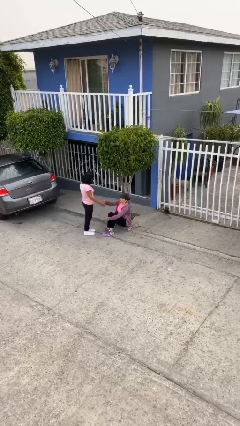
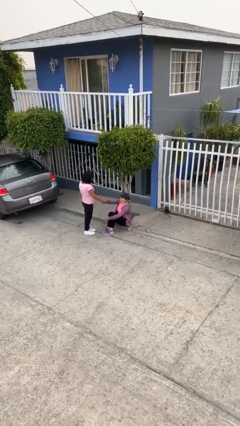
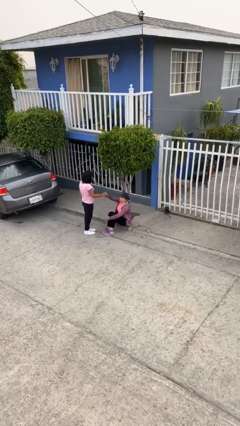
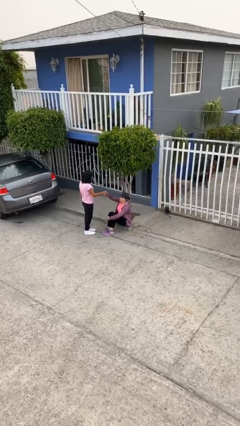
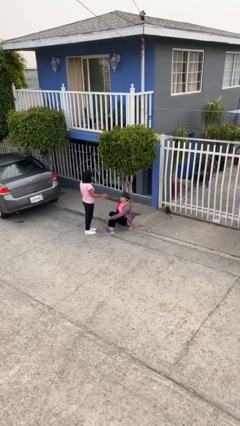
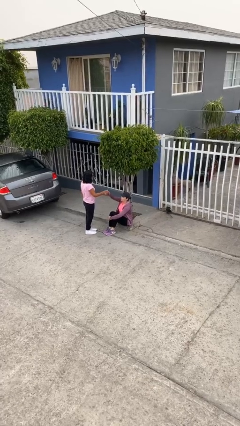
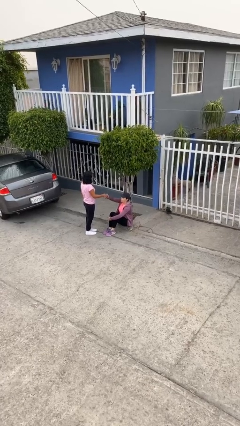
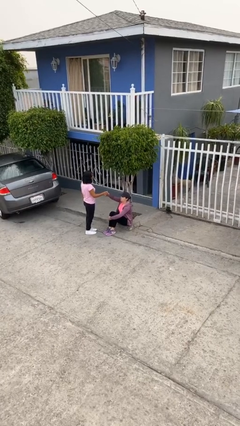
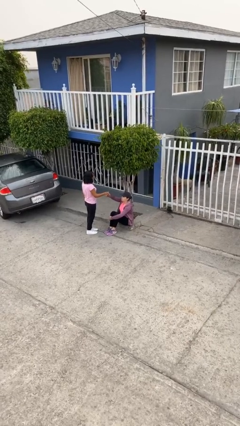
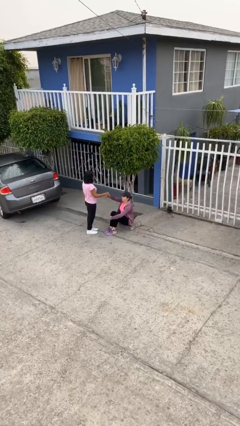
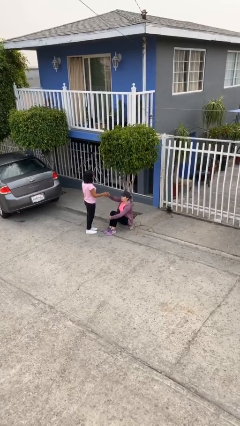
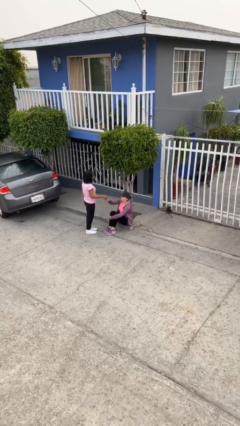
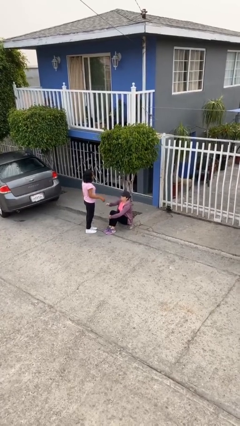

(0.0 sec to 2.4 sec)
person shakes hand

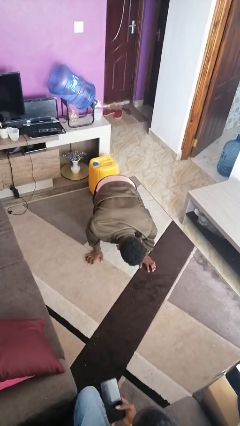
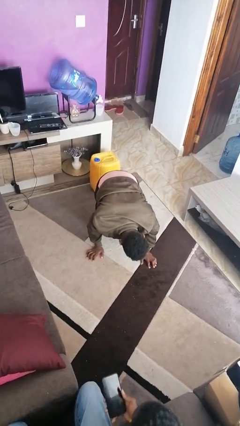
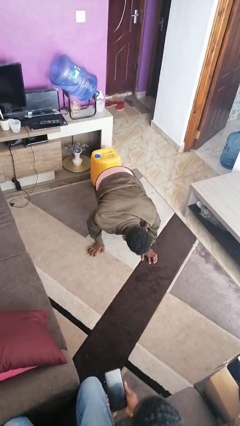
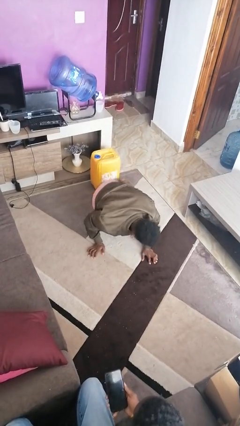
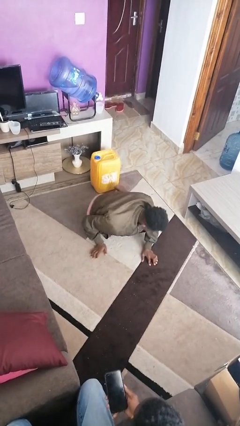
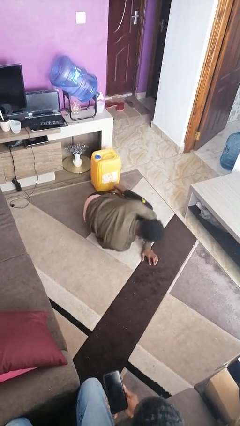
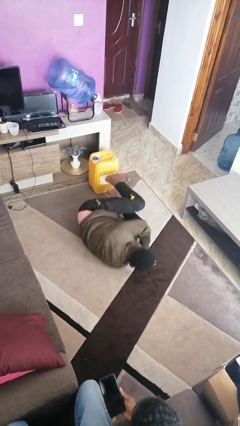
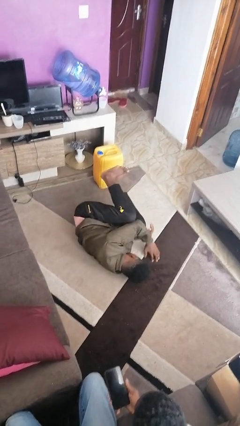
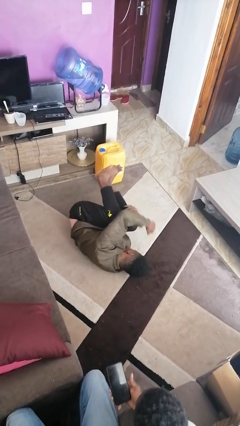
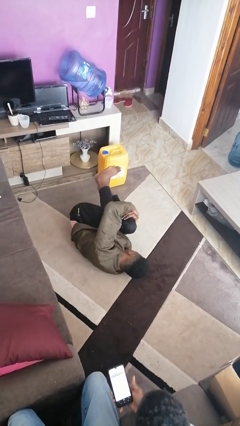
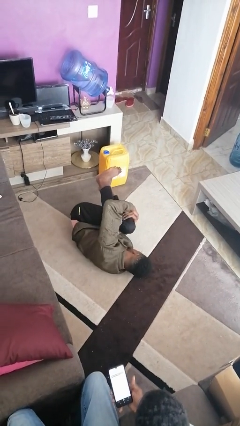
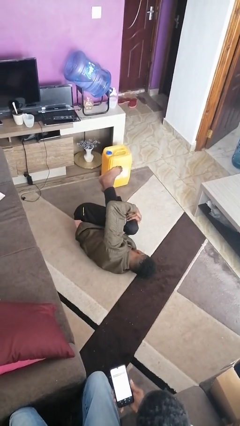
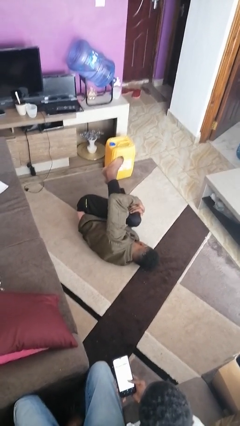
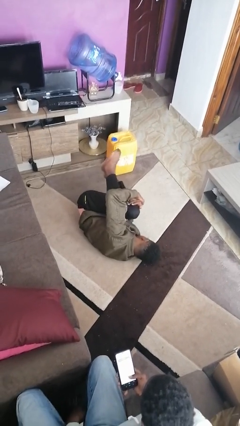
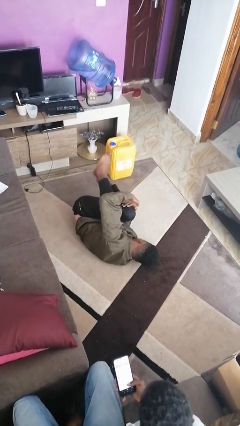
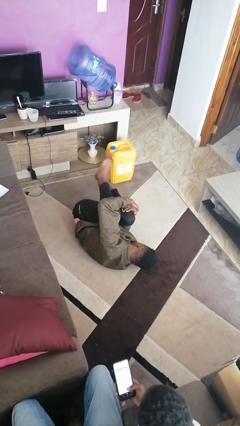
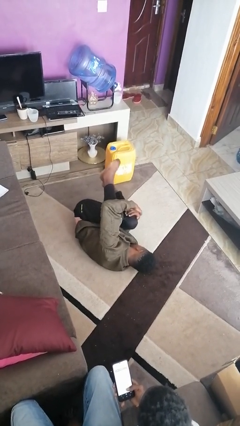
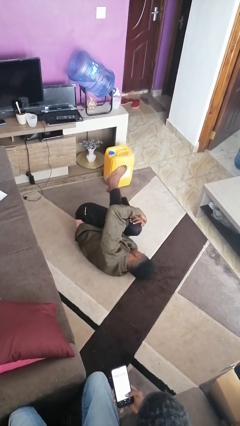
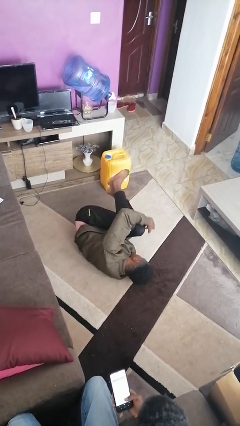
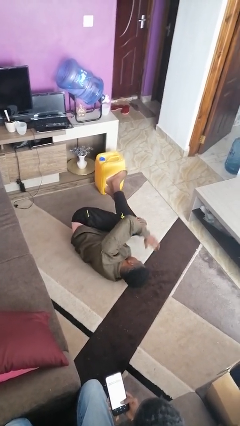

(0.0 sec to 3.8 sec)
person lies down on floor

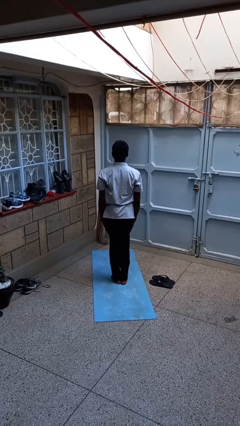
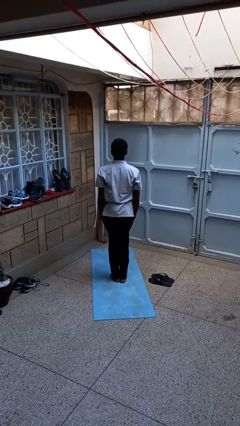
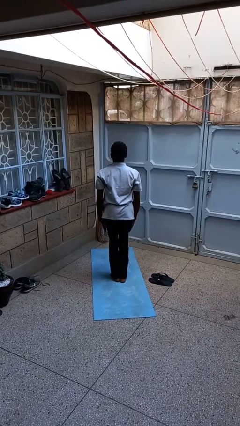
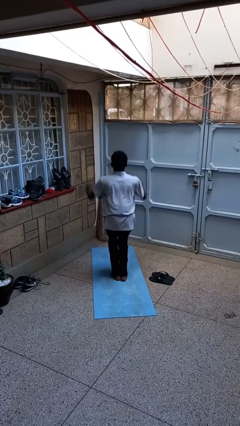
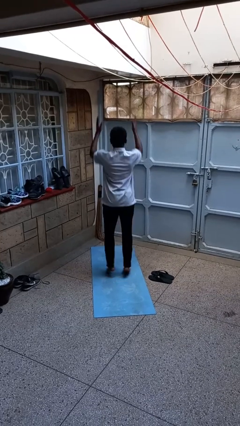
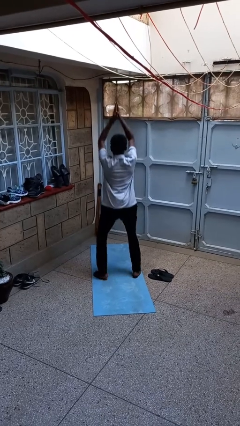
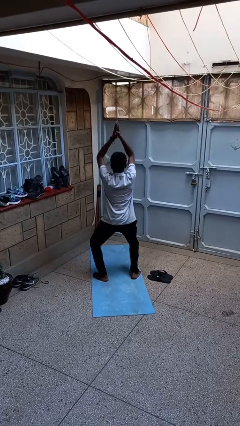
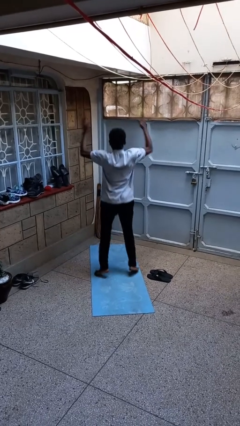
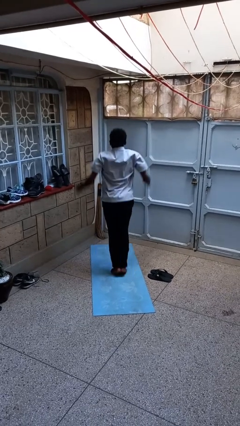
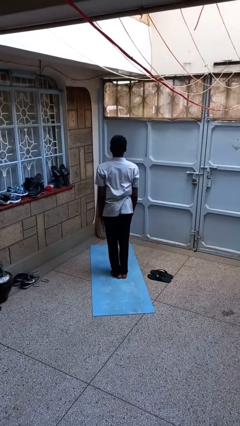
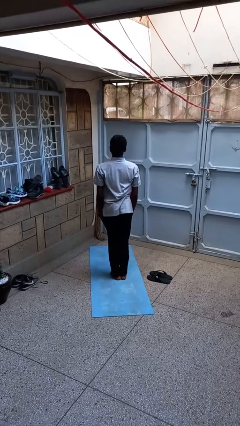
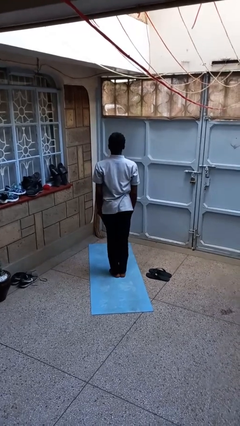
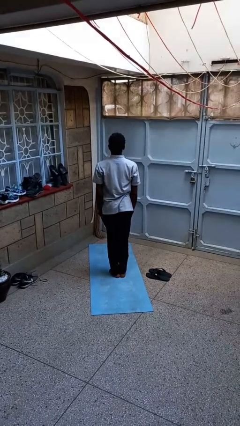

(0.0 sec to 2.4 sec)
person exercises with jumping jacks

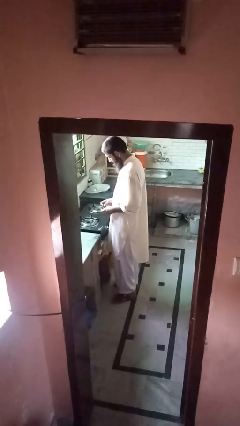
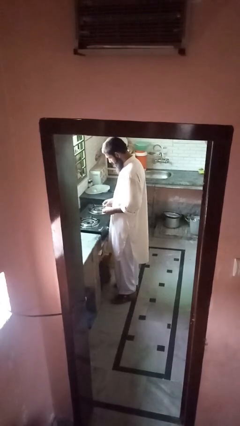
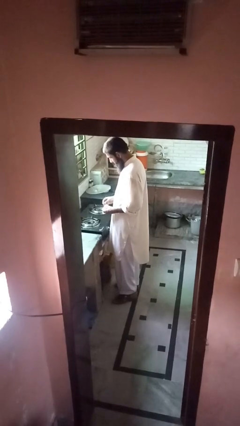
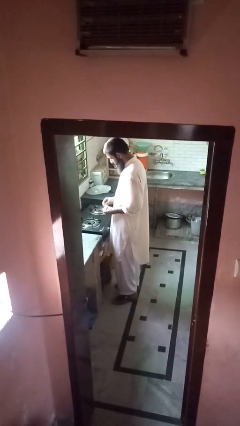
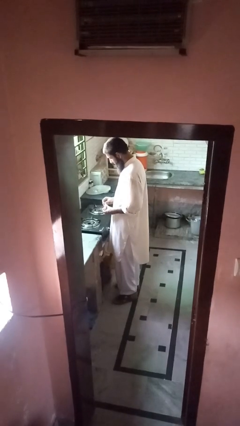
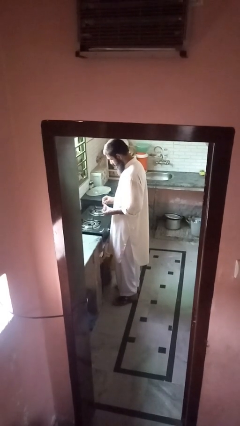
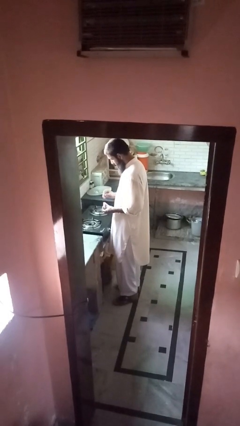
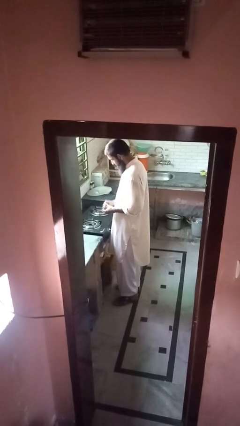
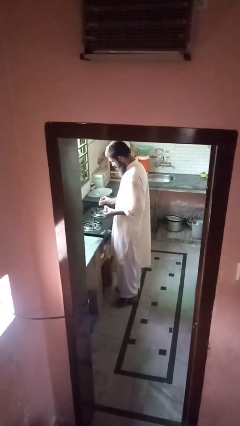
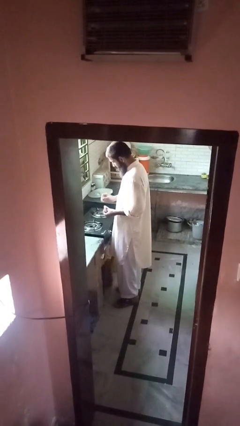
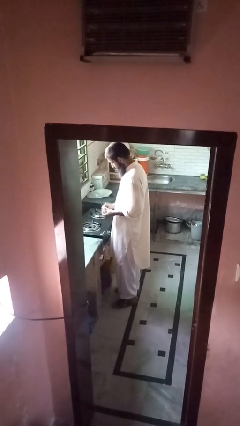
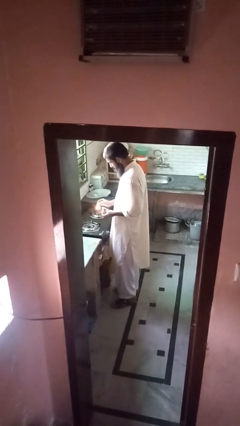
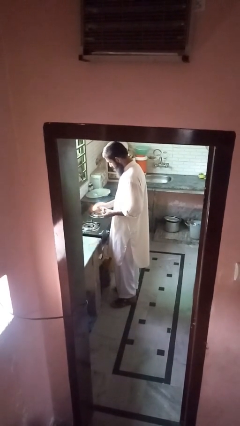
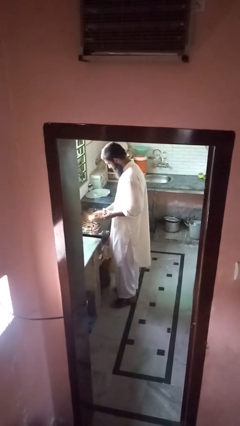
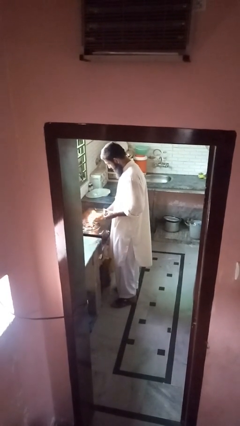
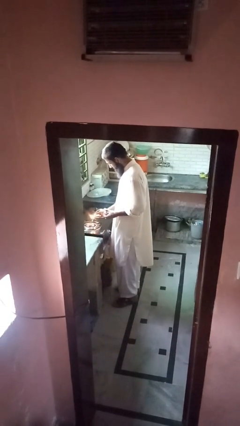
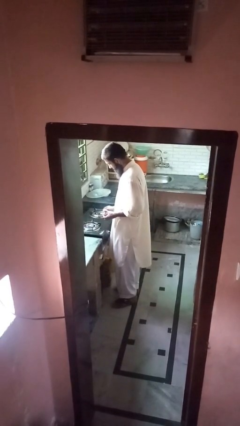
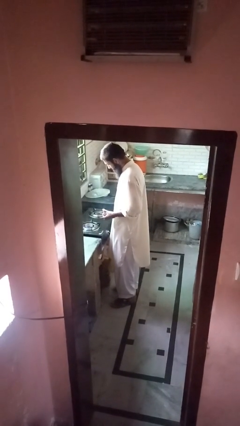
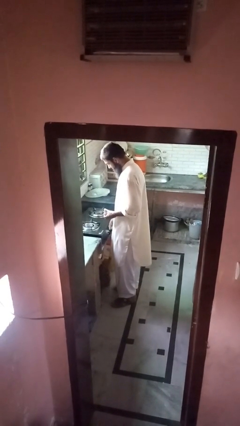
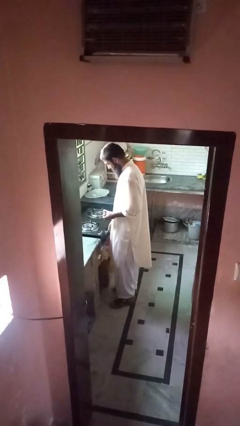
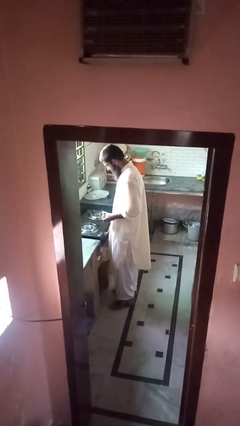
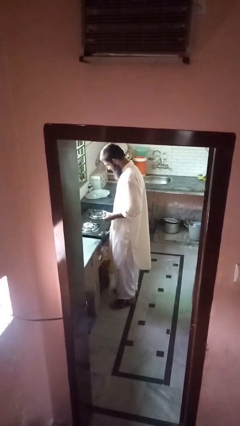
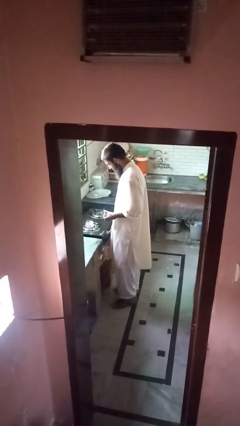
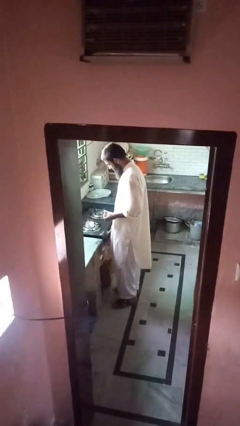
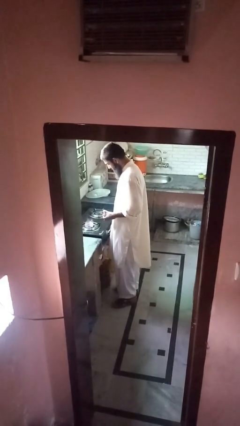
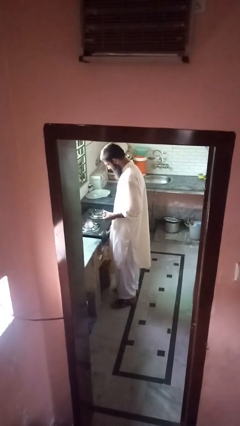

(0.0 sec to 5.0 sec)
person turns on stovetop

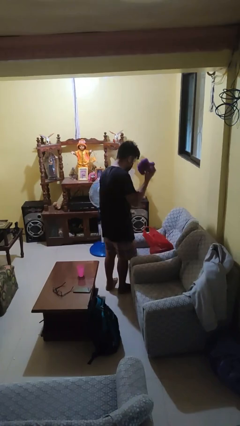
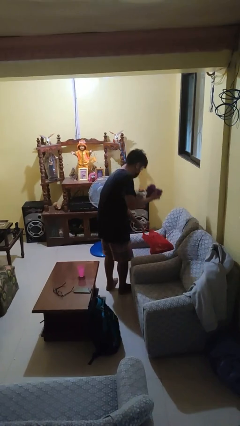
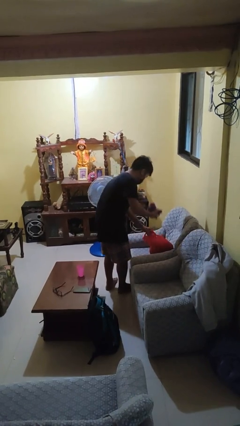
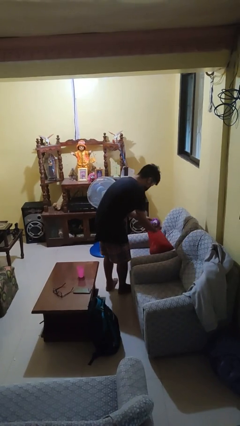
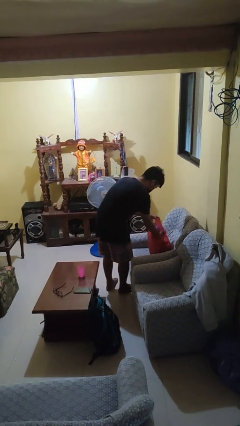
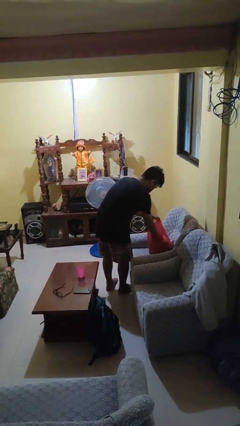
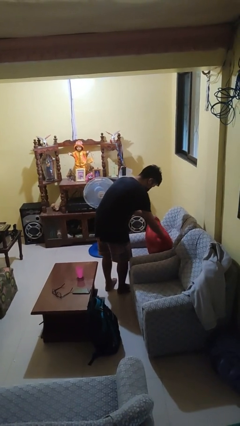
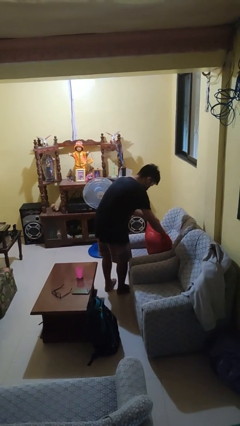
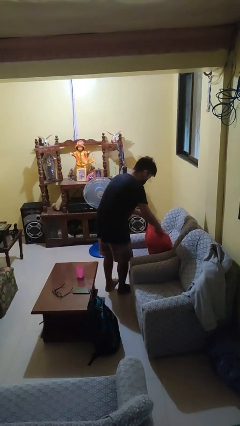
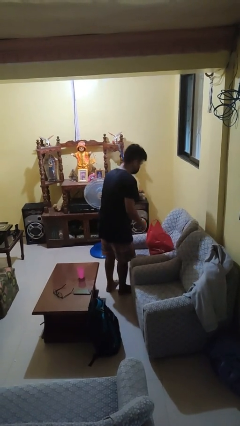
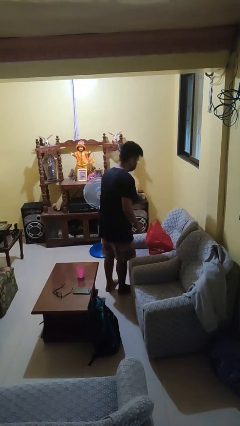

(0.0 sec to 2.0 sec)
person puts object into bag

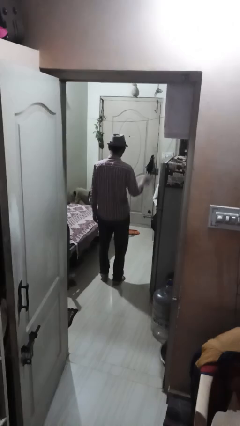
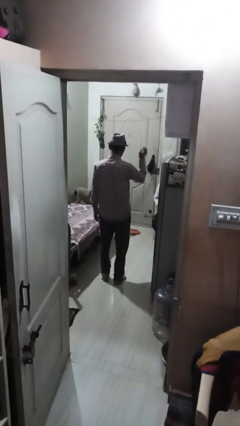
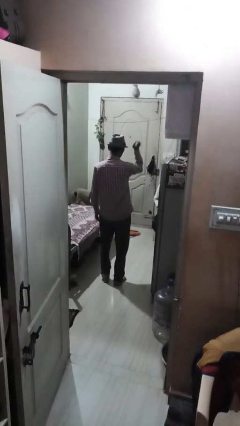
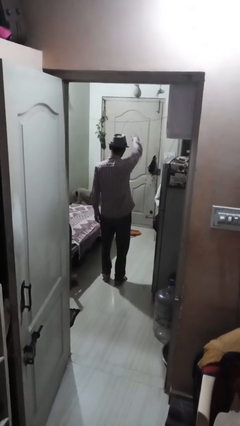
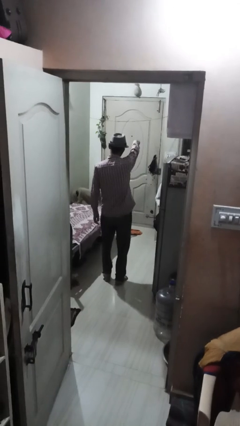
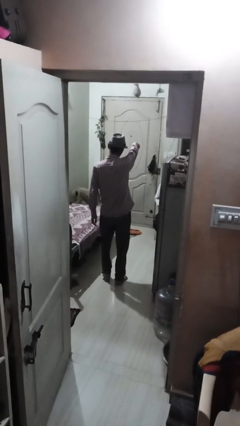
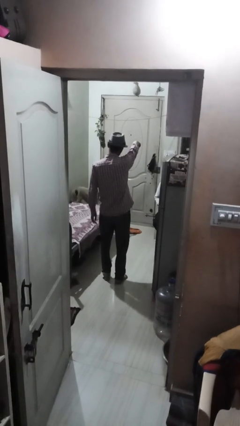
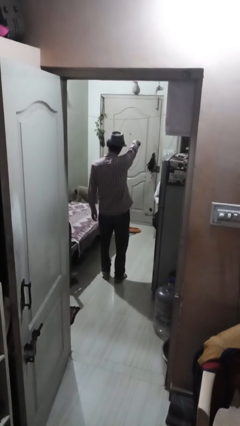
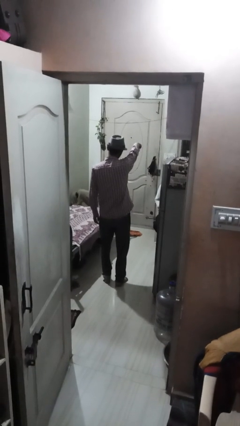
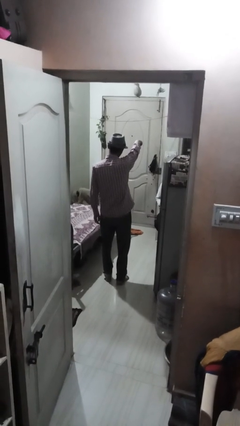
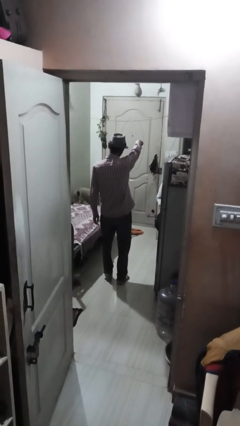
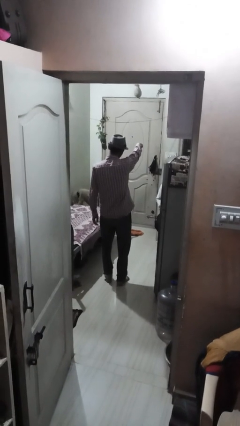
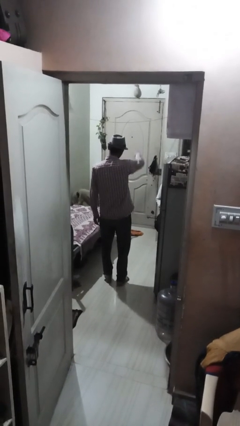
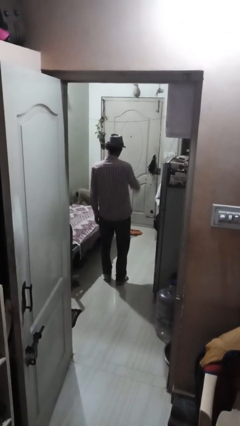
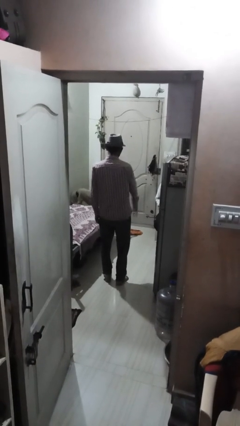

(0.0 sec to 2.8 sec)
person points at person
